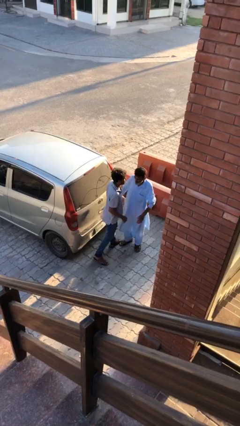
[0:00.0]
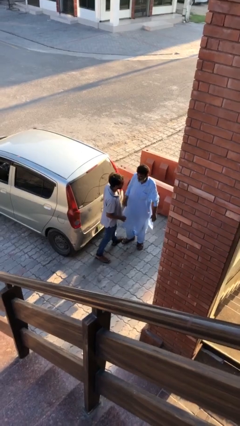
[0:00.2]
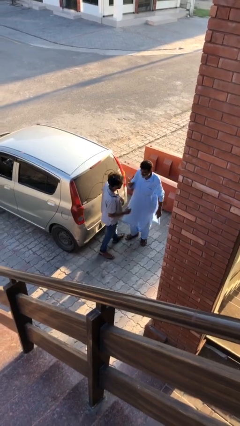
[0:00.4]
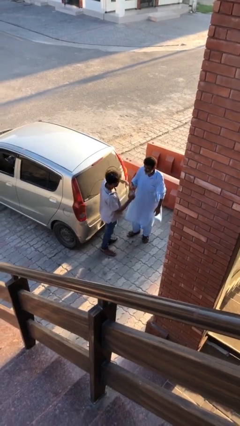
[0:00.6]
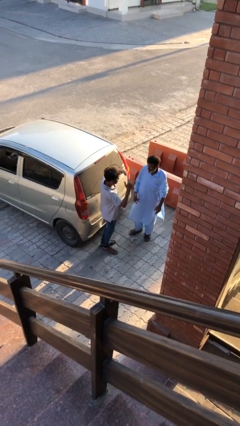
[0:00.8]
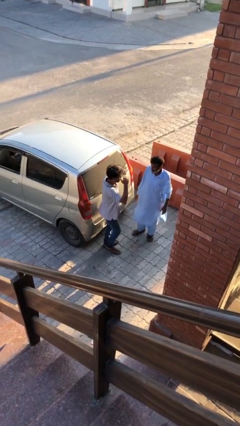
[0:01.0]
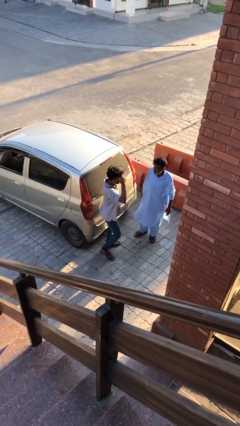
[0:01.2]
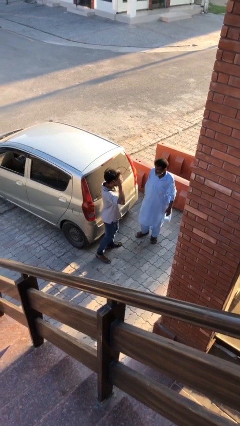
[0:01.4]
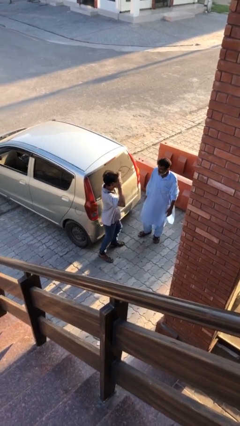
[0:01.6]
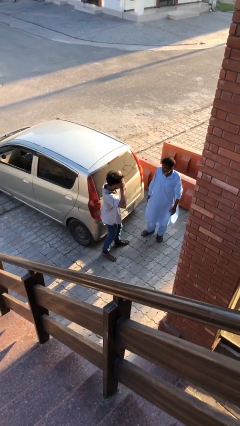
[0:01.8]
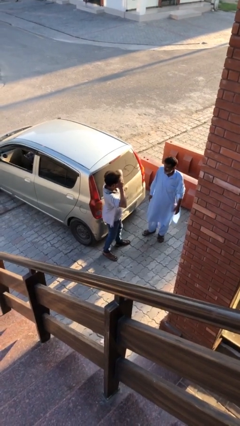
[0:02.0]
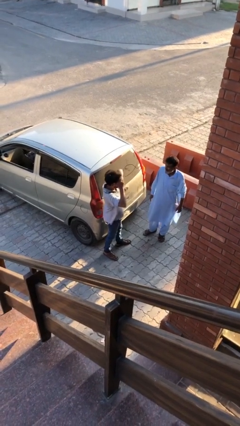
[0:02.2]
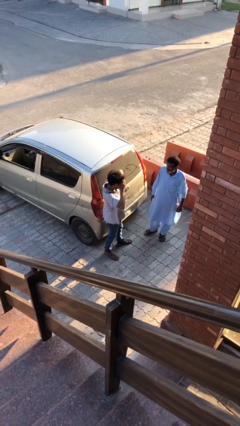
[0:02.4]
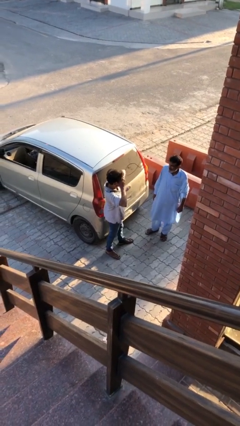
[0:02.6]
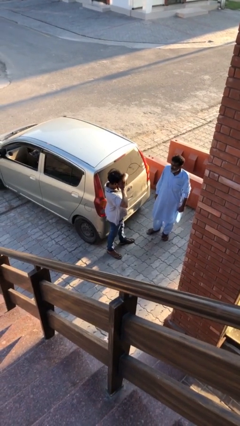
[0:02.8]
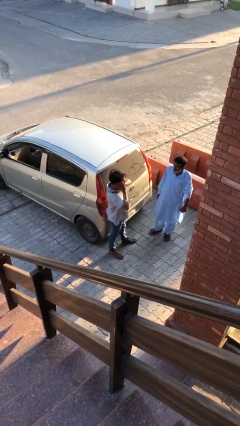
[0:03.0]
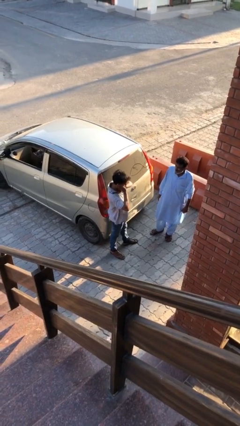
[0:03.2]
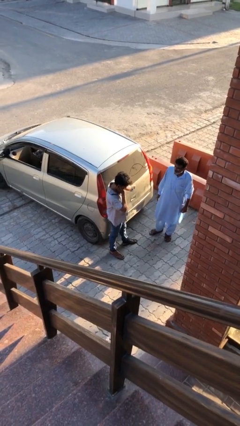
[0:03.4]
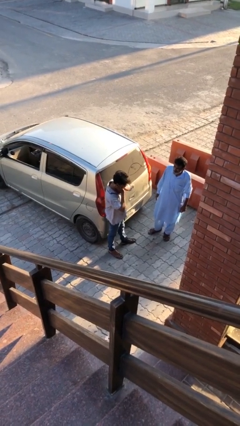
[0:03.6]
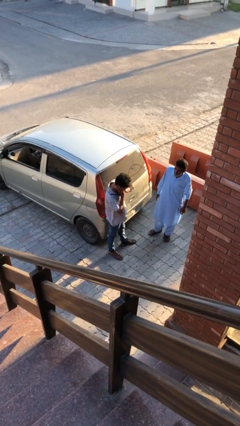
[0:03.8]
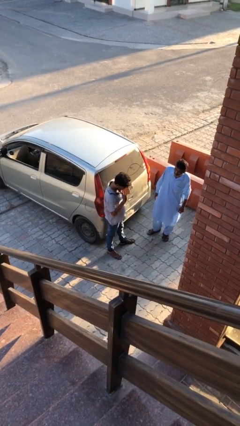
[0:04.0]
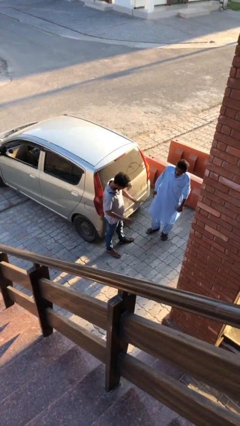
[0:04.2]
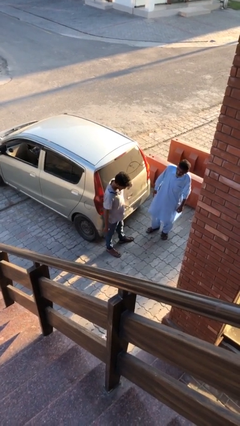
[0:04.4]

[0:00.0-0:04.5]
person talks to person

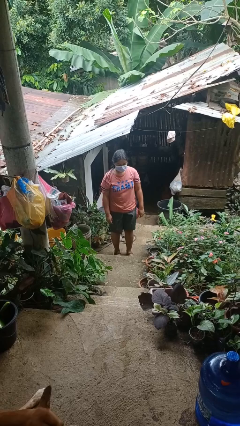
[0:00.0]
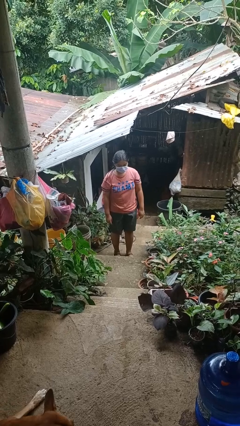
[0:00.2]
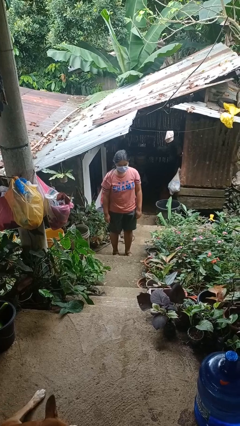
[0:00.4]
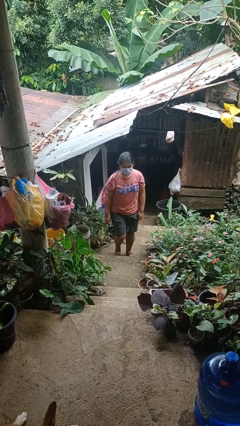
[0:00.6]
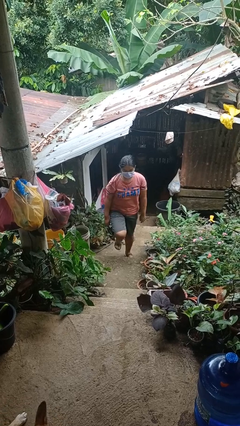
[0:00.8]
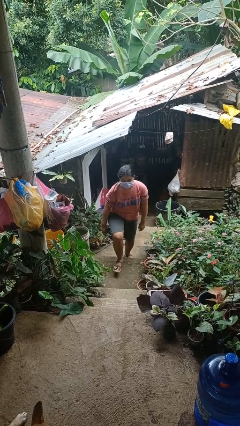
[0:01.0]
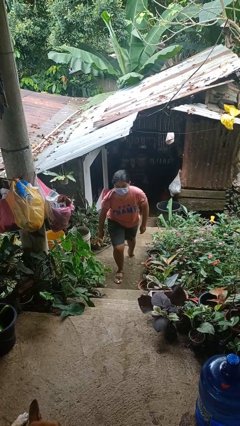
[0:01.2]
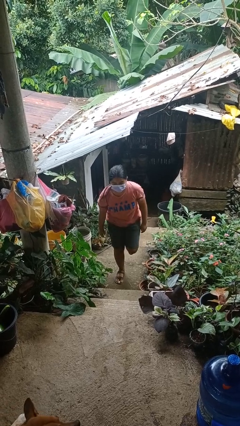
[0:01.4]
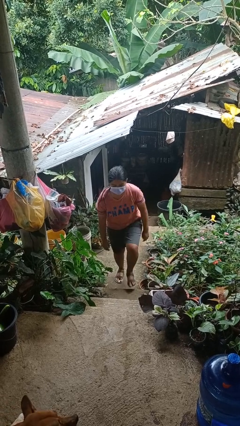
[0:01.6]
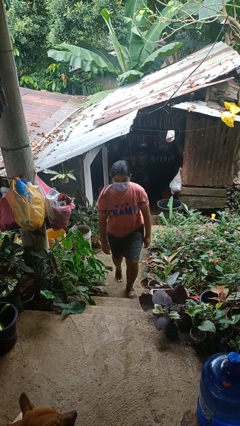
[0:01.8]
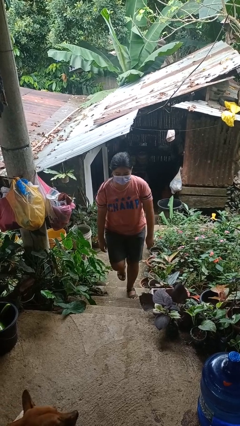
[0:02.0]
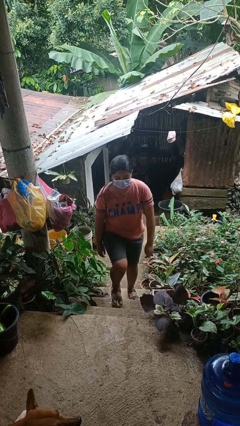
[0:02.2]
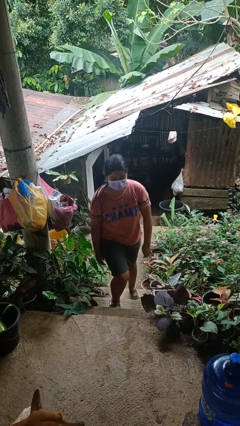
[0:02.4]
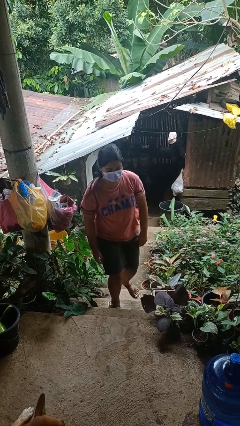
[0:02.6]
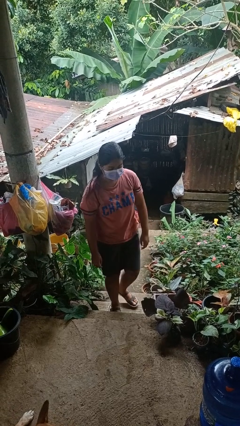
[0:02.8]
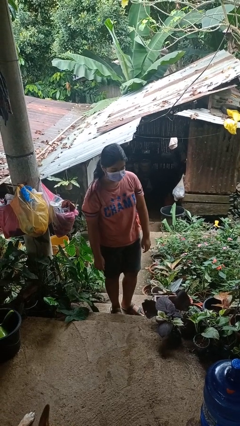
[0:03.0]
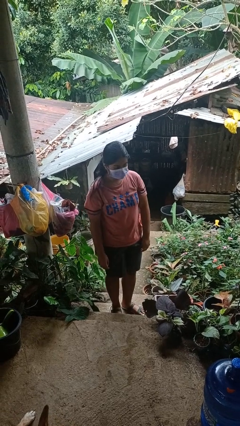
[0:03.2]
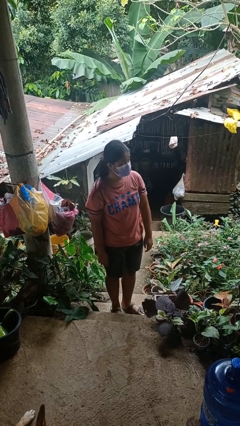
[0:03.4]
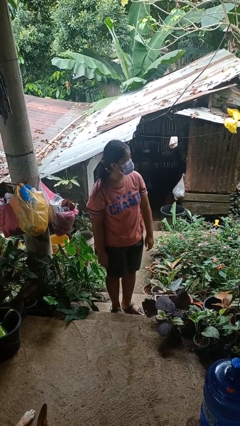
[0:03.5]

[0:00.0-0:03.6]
person climbs up stairs

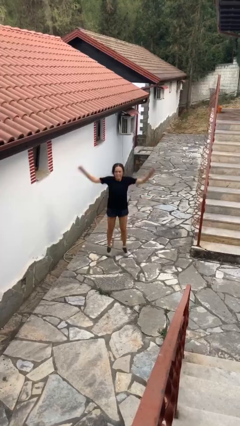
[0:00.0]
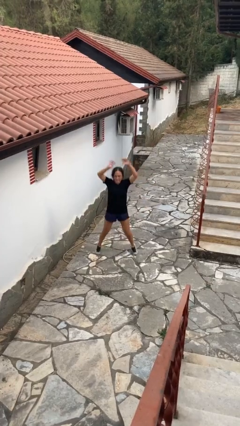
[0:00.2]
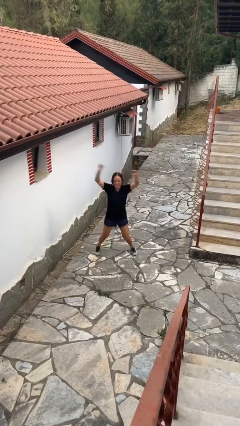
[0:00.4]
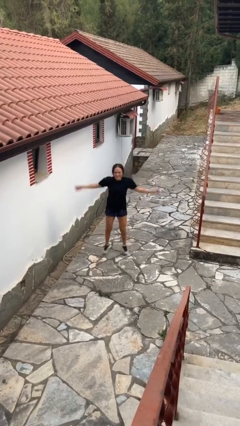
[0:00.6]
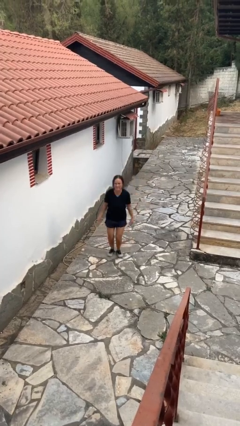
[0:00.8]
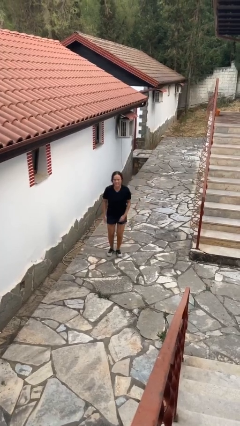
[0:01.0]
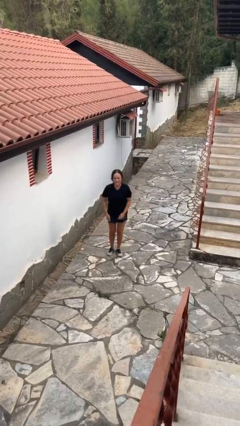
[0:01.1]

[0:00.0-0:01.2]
person exercises with jumping jacks

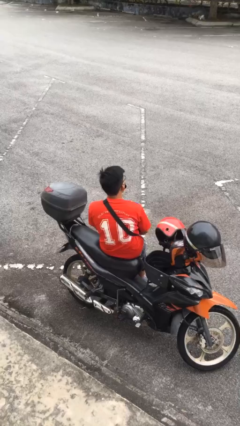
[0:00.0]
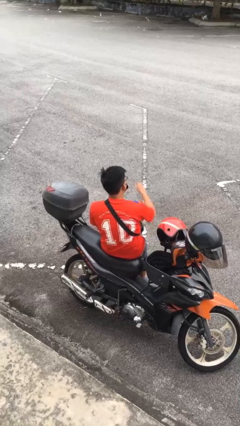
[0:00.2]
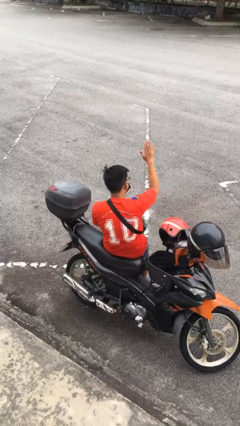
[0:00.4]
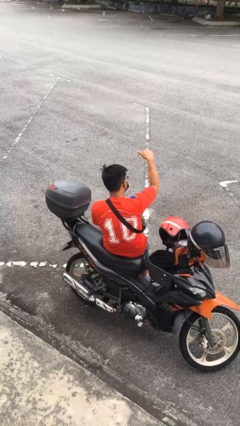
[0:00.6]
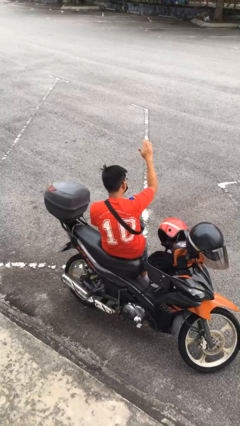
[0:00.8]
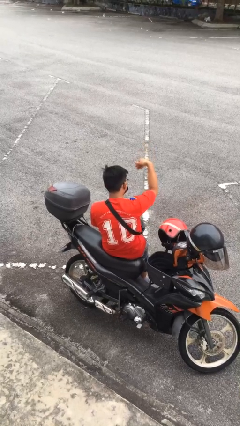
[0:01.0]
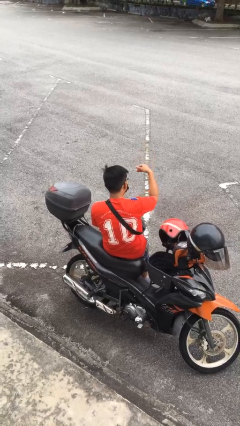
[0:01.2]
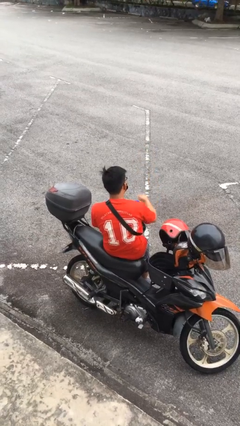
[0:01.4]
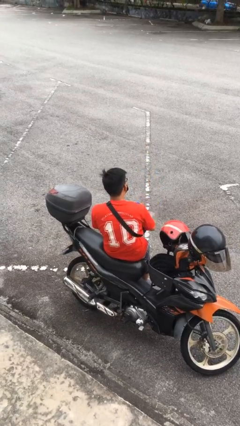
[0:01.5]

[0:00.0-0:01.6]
person gestures come here

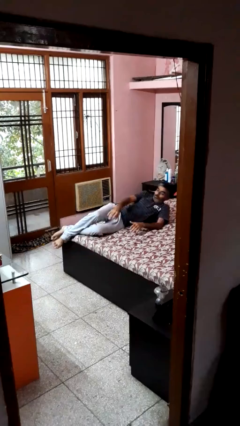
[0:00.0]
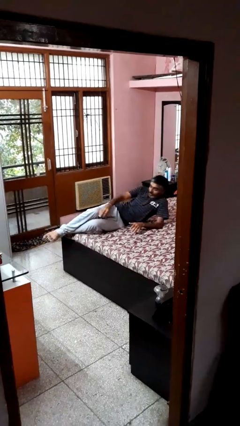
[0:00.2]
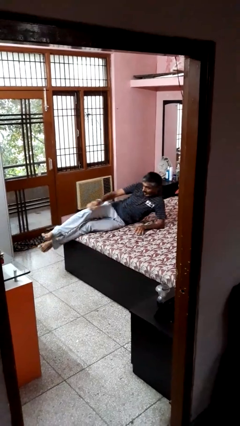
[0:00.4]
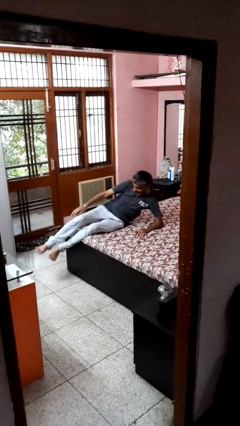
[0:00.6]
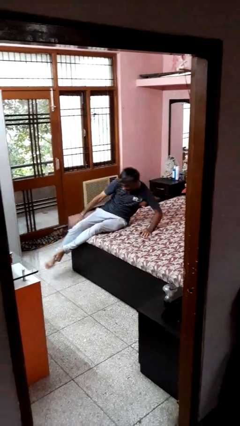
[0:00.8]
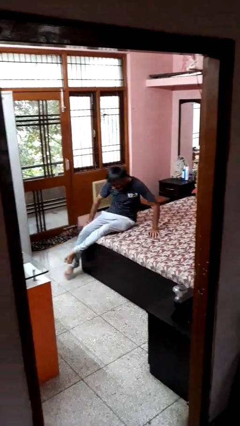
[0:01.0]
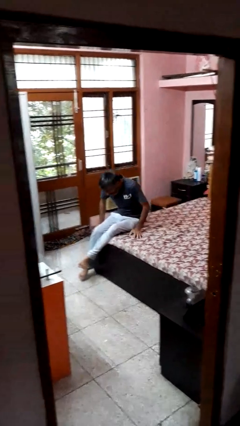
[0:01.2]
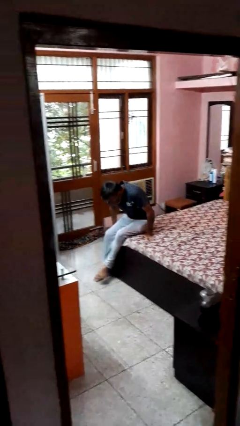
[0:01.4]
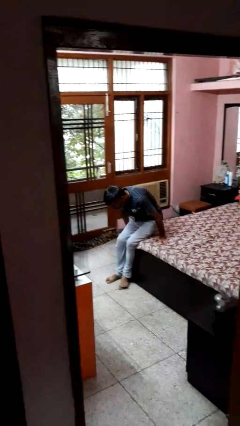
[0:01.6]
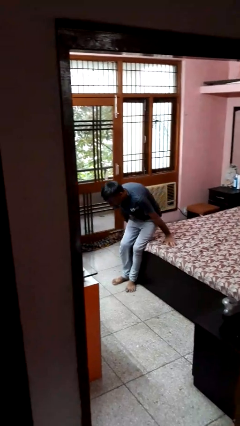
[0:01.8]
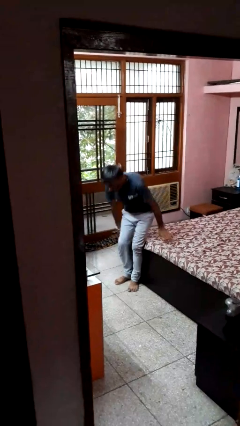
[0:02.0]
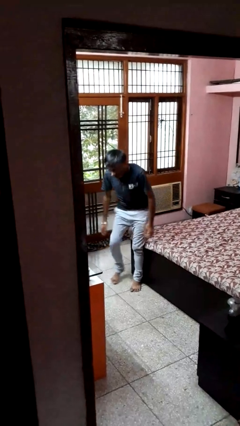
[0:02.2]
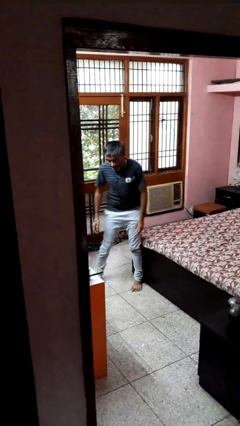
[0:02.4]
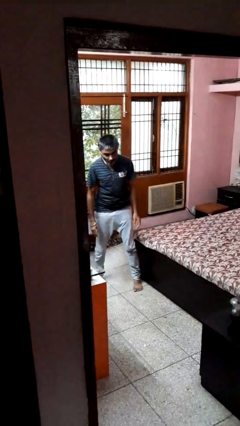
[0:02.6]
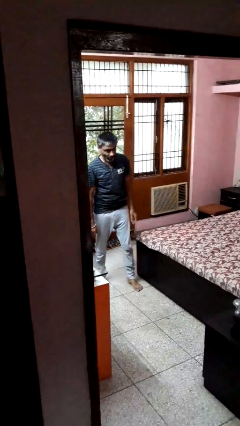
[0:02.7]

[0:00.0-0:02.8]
person stands up

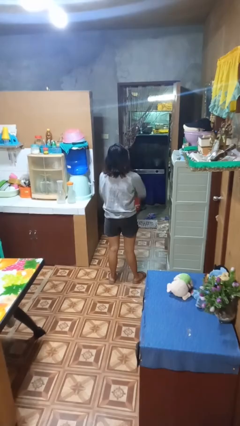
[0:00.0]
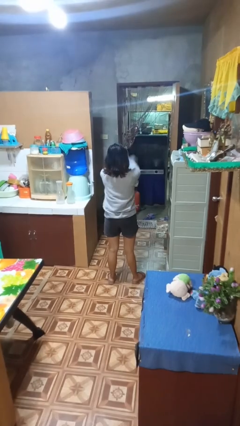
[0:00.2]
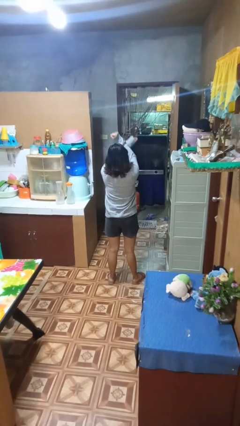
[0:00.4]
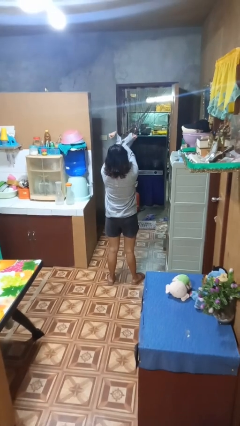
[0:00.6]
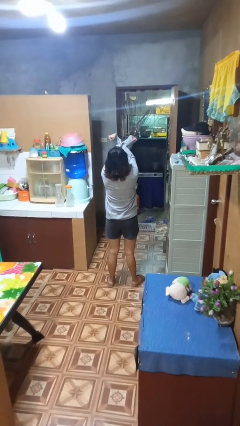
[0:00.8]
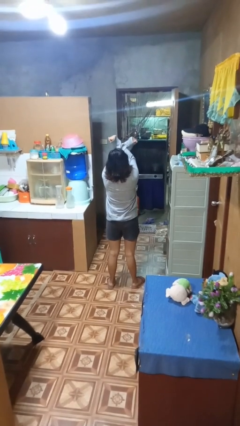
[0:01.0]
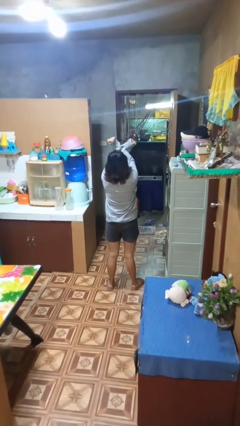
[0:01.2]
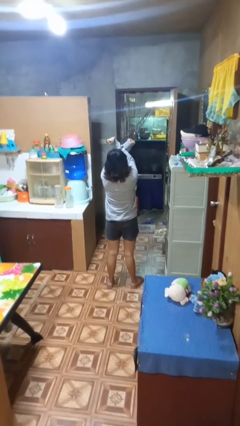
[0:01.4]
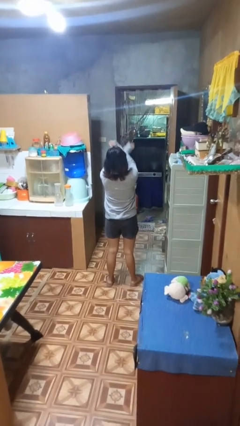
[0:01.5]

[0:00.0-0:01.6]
person gestures arms x

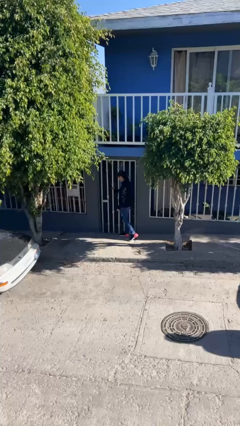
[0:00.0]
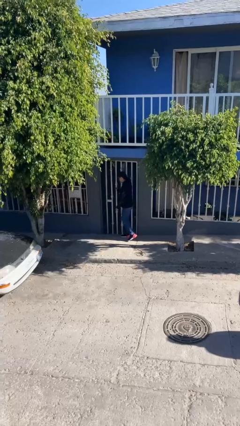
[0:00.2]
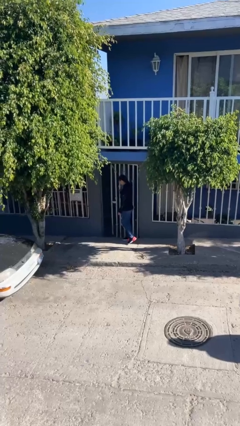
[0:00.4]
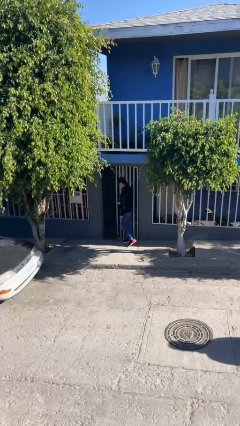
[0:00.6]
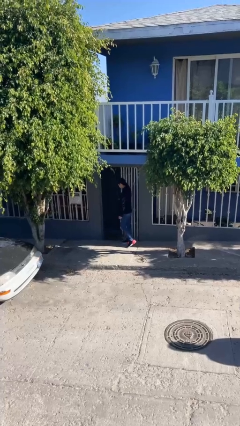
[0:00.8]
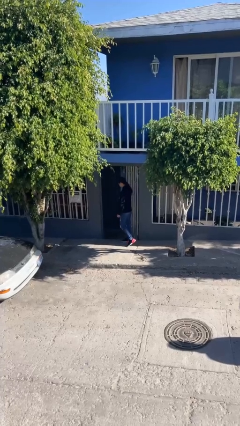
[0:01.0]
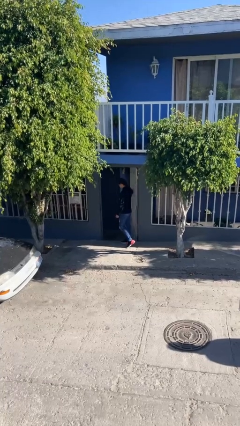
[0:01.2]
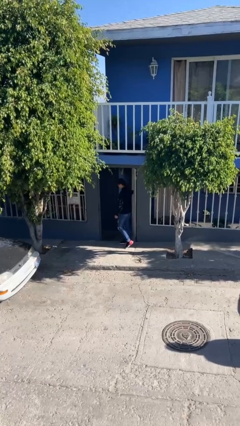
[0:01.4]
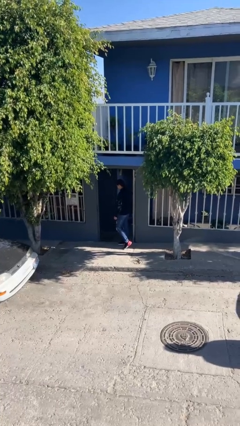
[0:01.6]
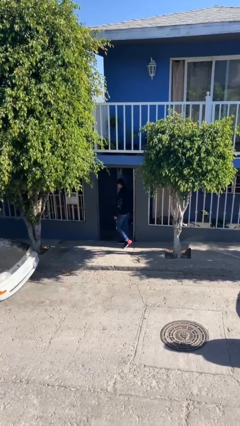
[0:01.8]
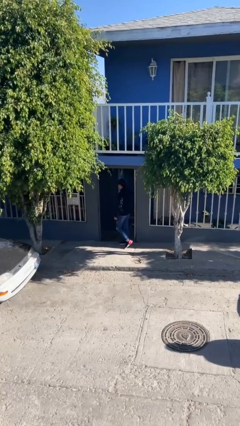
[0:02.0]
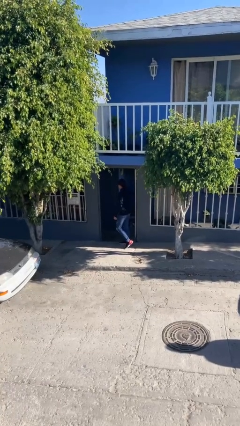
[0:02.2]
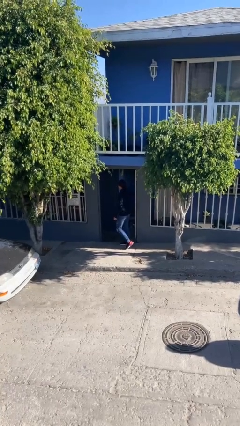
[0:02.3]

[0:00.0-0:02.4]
person opens facility door
